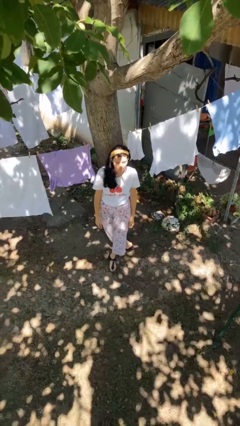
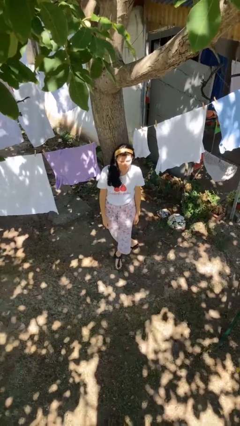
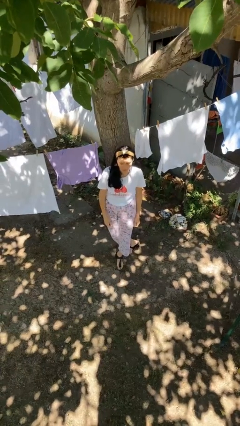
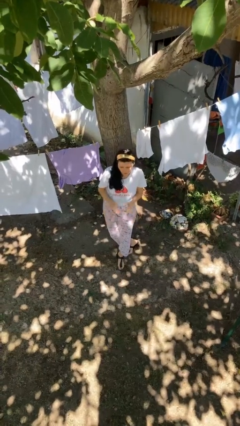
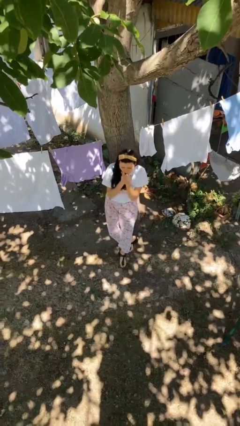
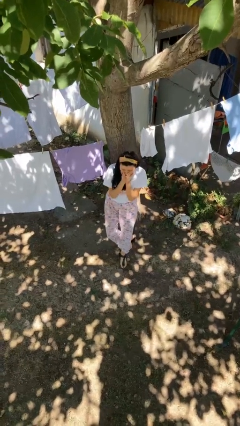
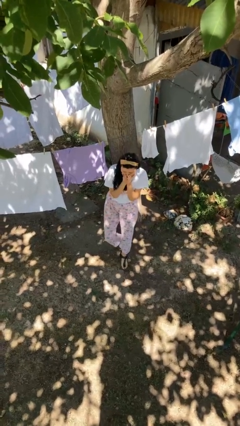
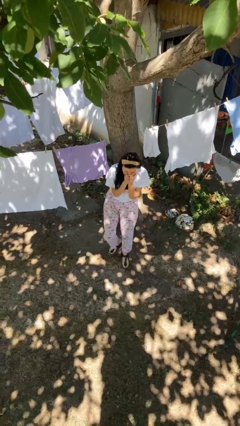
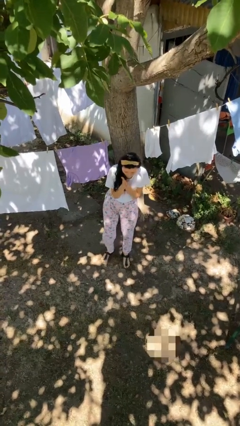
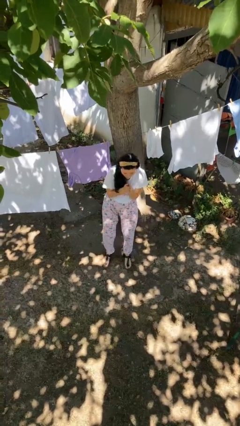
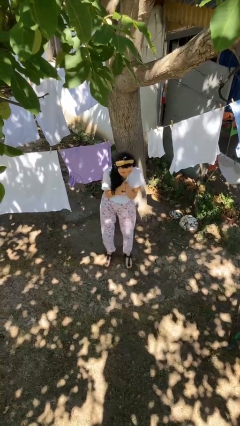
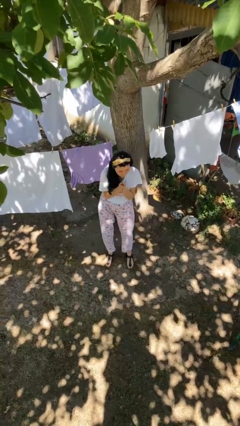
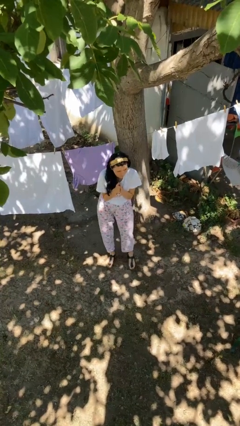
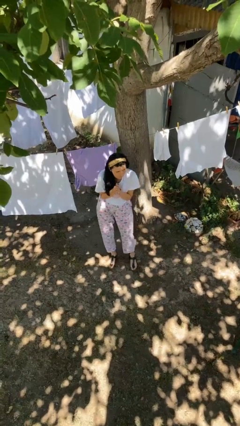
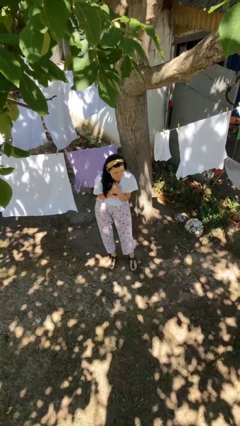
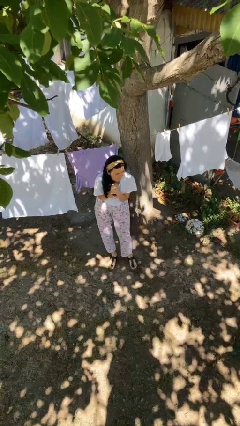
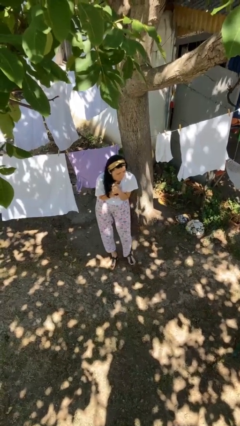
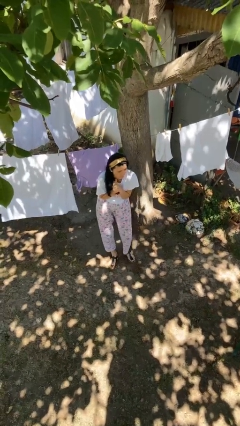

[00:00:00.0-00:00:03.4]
person blows into hands

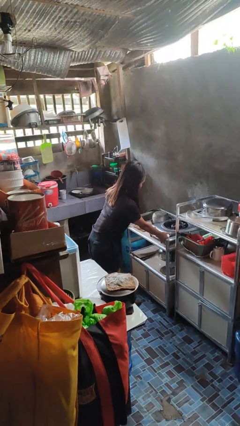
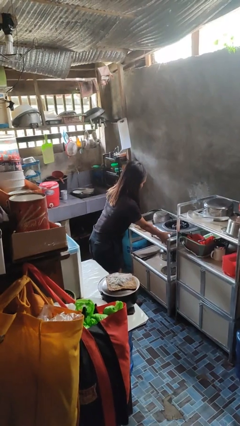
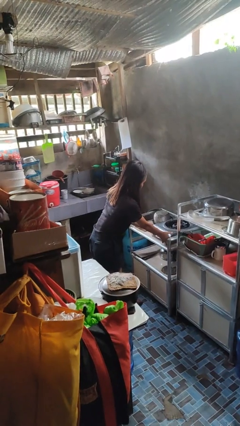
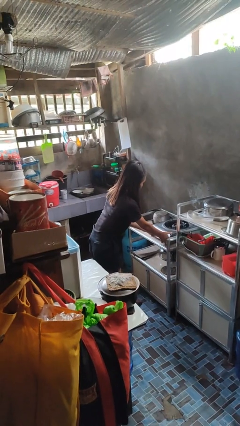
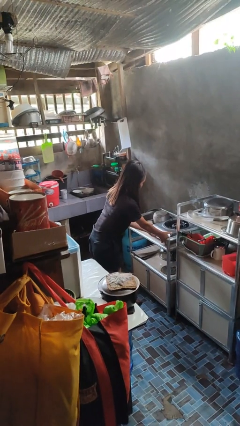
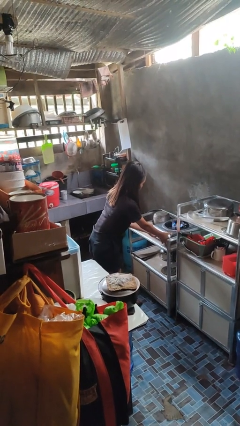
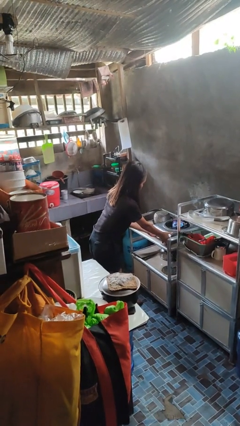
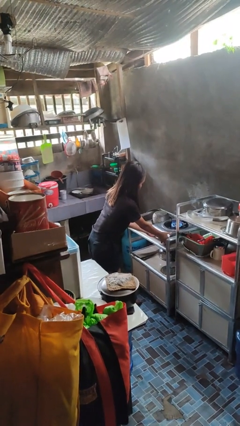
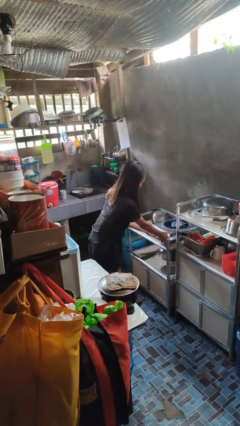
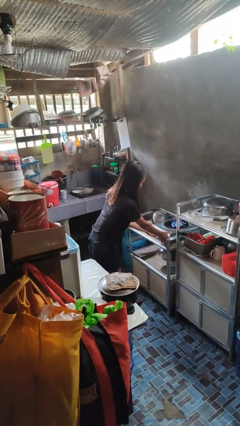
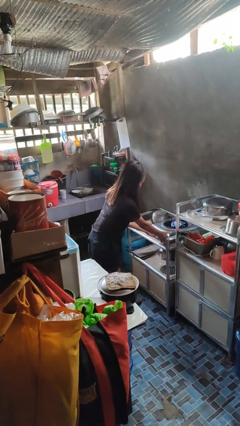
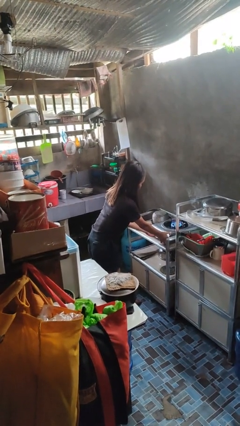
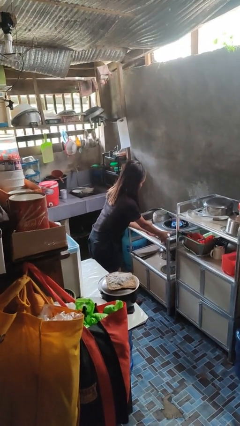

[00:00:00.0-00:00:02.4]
person turns on stovetop

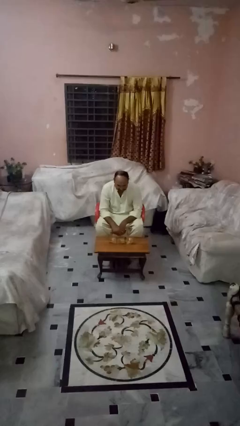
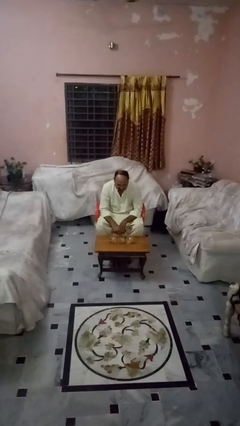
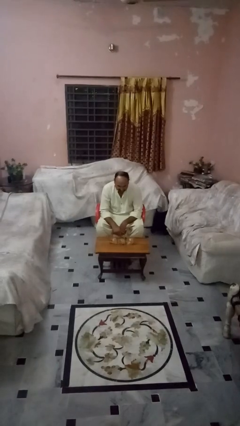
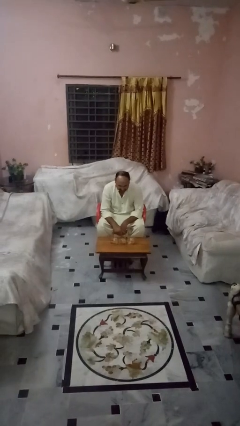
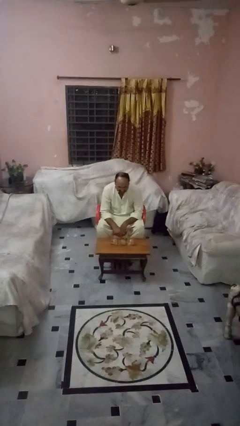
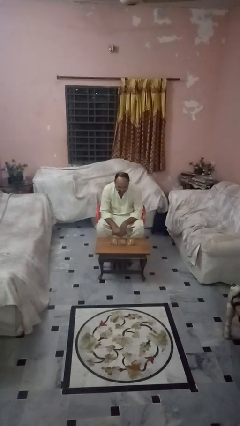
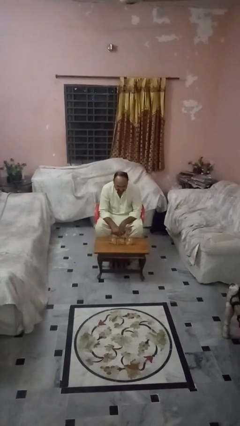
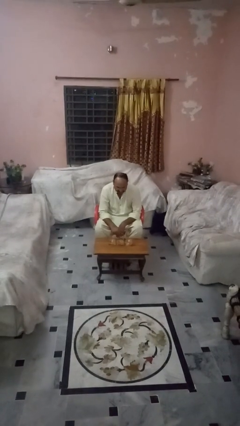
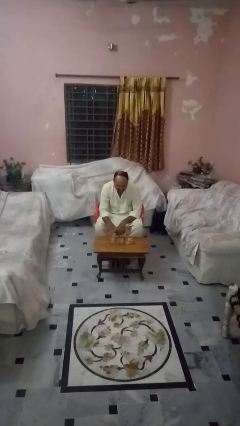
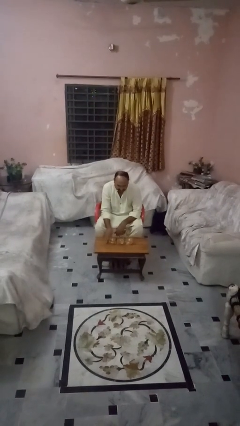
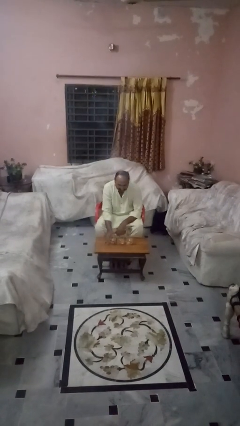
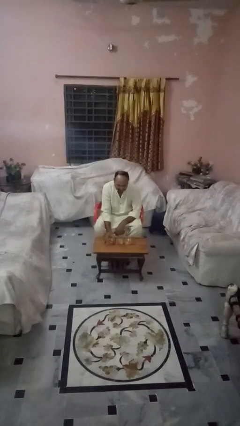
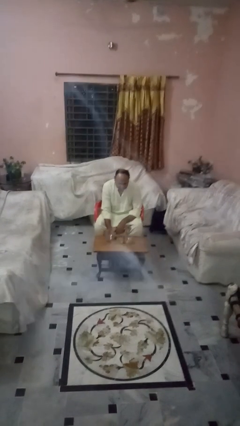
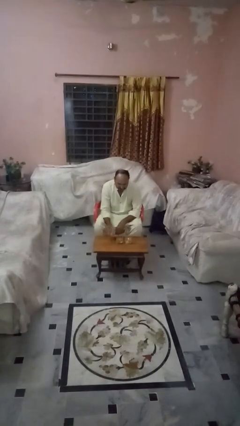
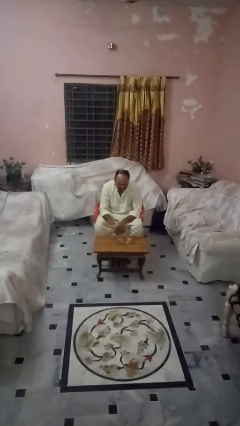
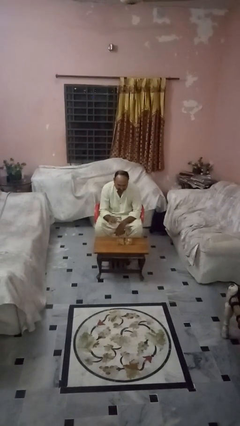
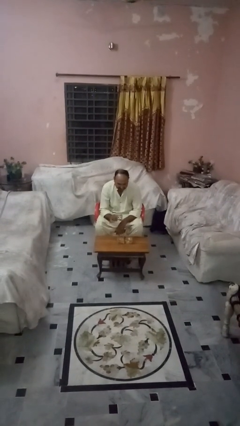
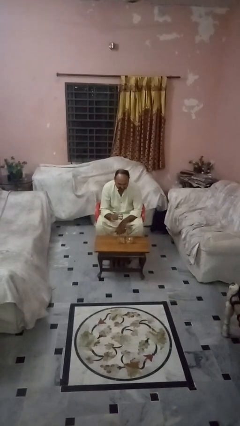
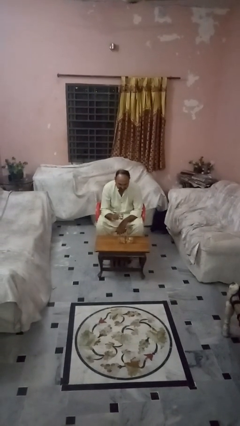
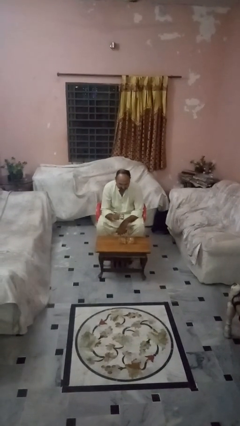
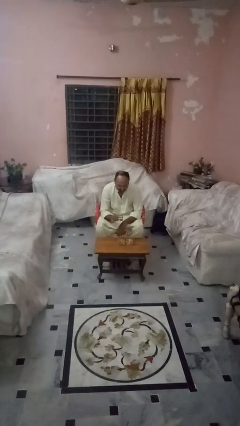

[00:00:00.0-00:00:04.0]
person picks up object from table

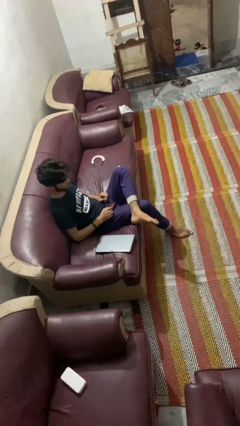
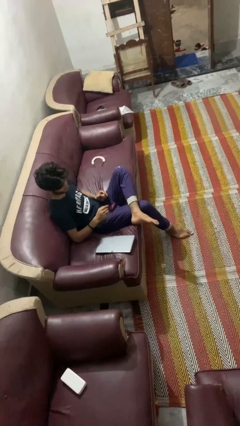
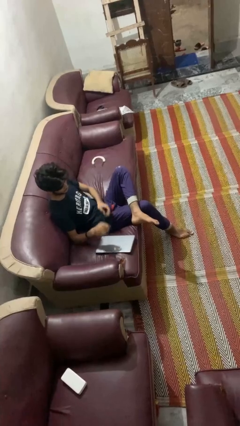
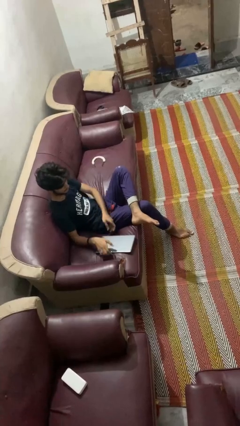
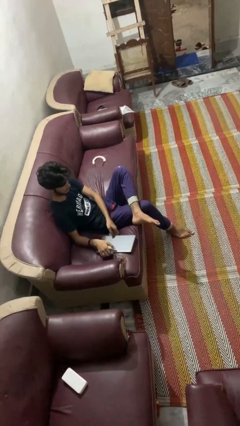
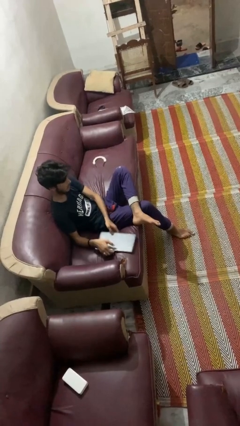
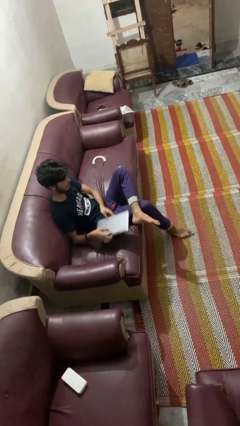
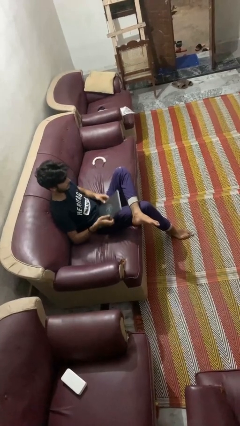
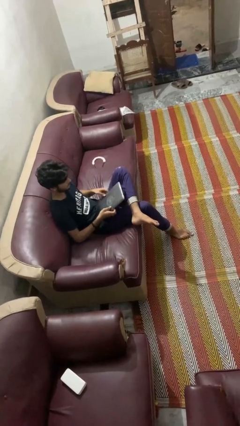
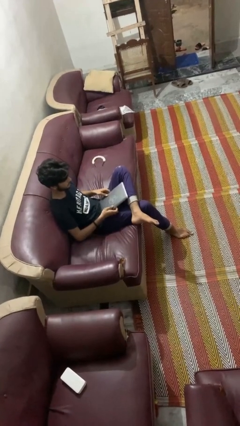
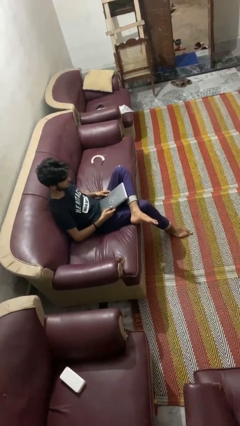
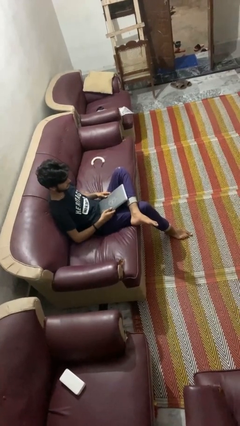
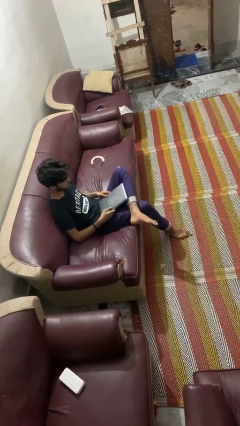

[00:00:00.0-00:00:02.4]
person picks up object from couch

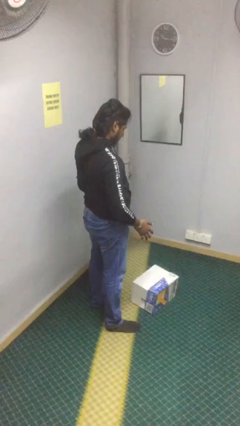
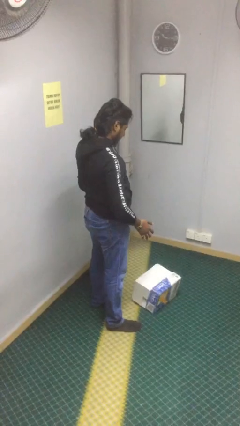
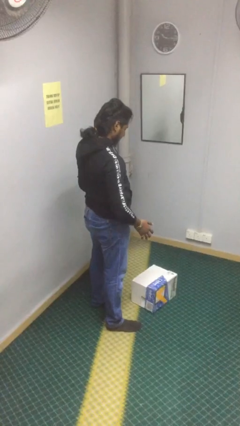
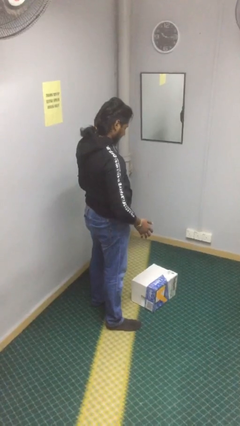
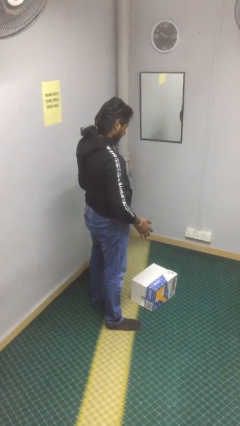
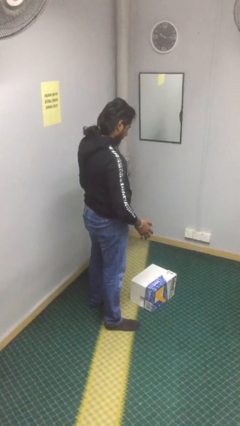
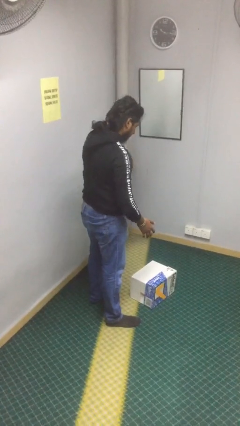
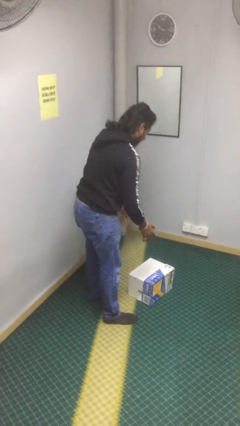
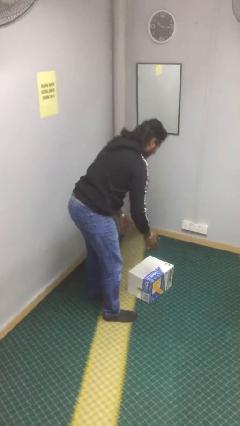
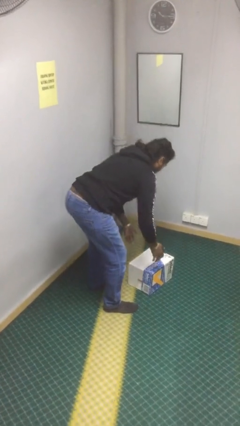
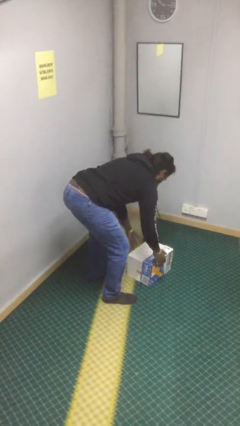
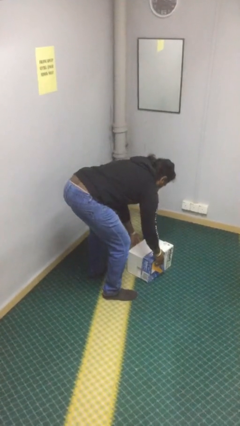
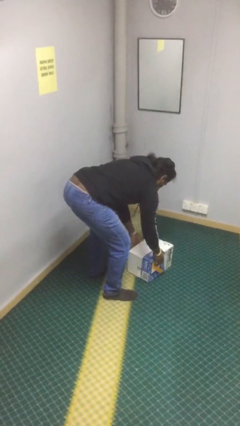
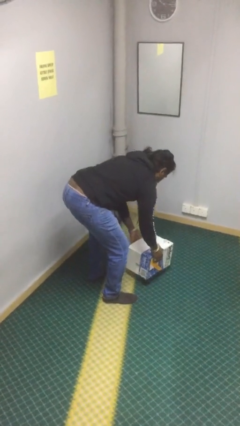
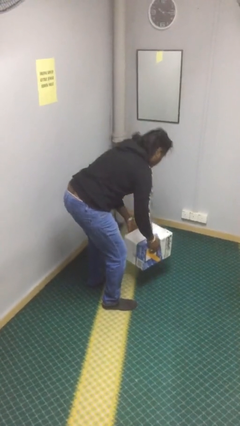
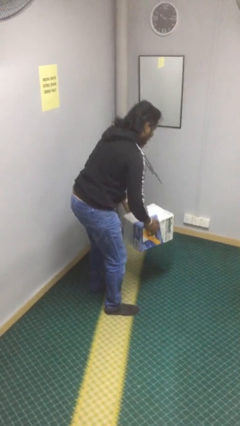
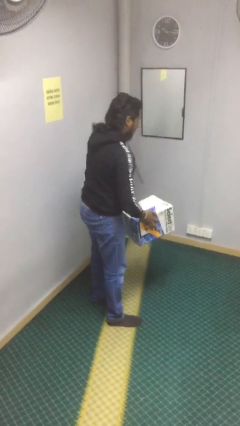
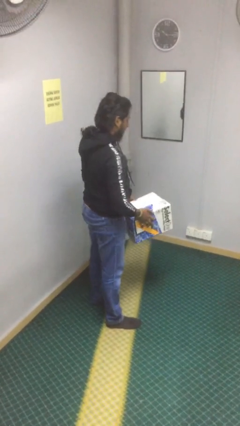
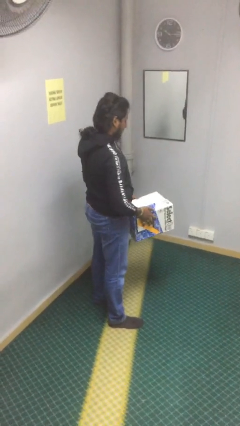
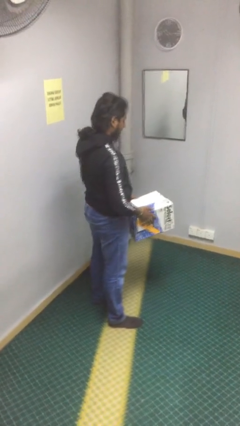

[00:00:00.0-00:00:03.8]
person picks up object from floor

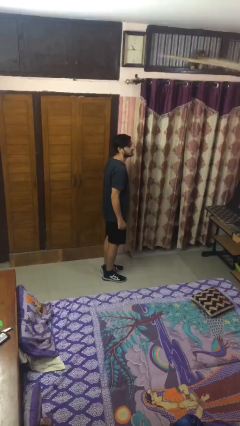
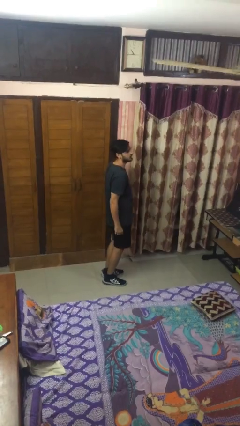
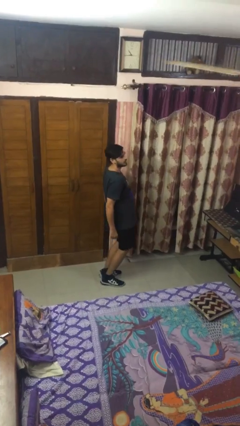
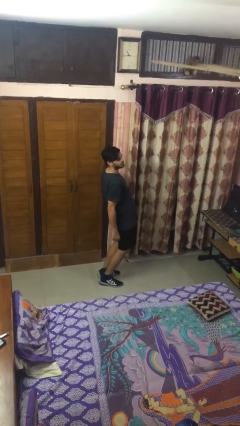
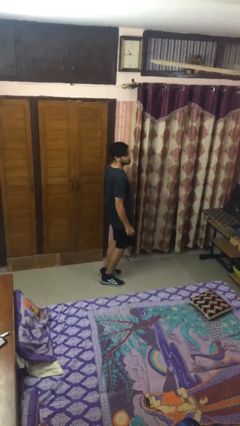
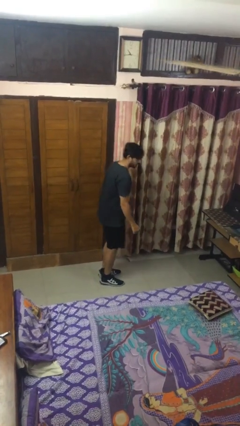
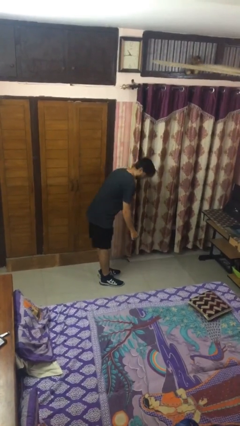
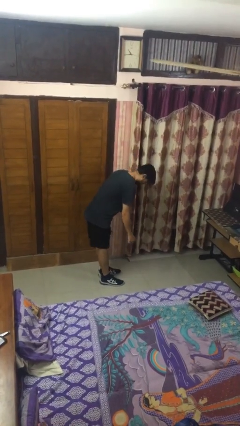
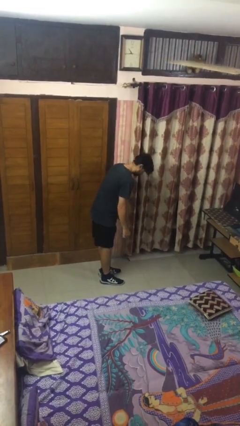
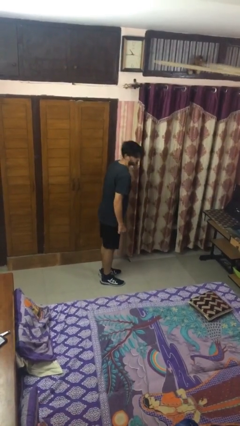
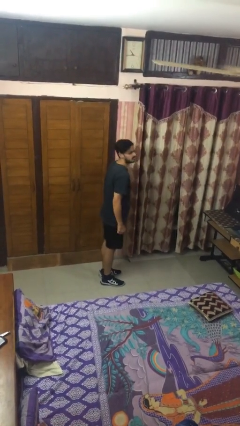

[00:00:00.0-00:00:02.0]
person wiggles hips
